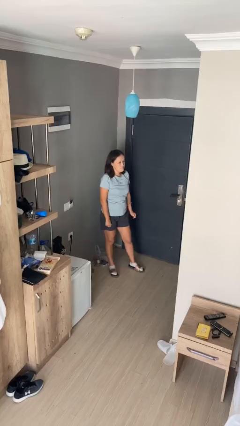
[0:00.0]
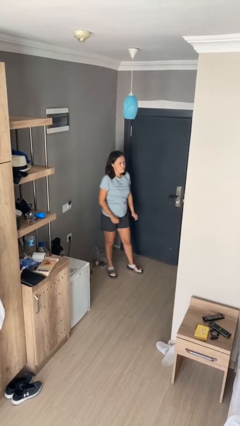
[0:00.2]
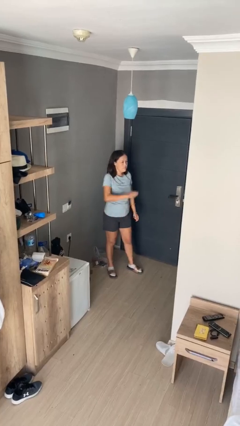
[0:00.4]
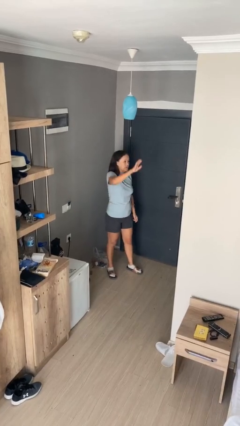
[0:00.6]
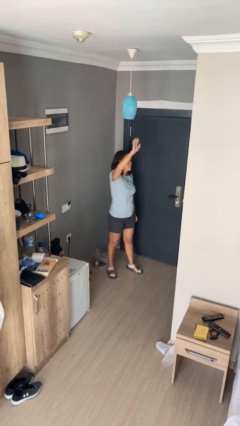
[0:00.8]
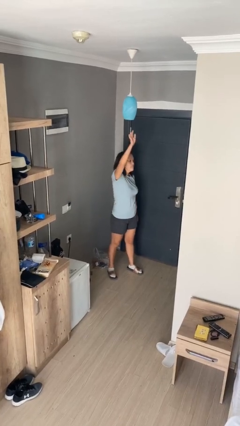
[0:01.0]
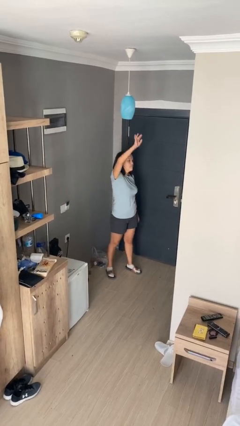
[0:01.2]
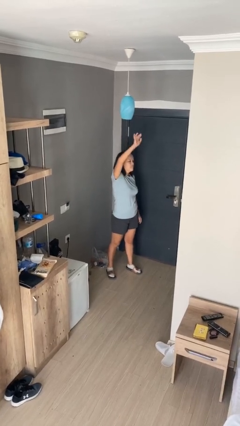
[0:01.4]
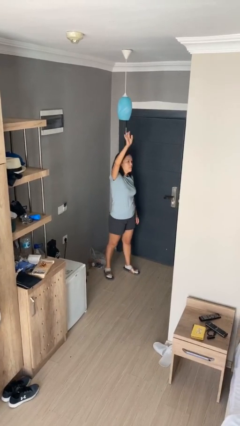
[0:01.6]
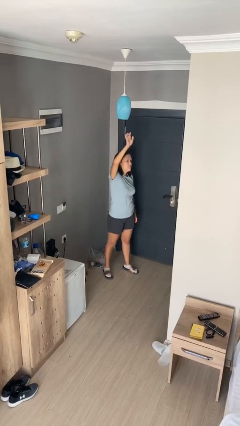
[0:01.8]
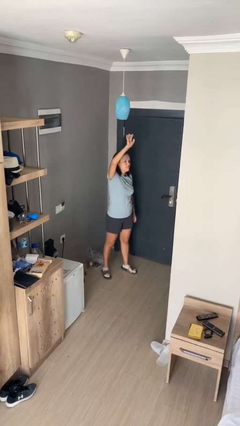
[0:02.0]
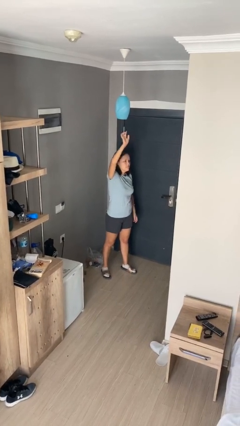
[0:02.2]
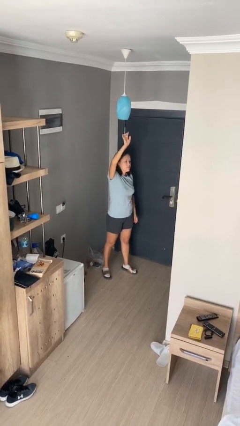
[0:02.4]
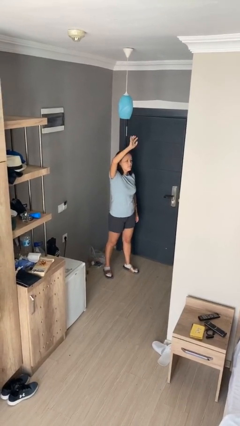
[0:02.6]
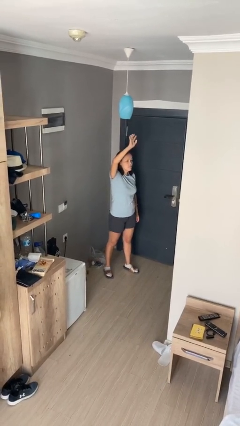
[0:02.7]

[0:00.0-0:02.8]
person gestures raise hand

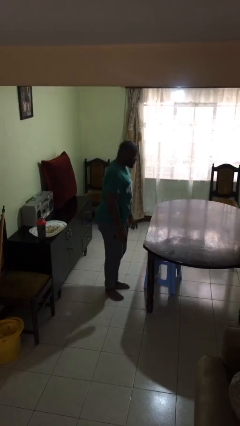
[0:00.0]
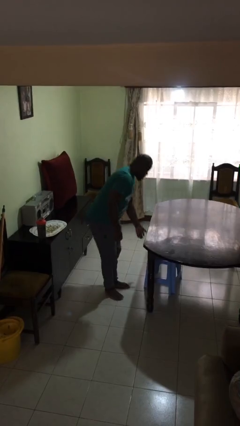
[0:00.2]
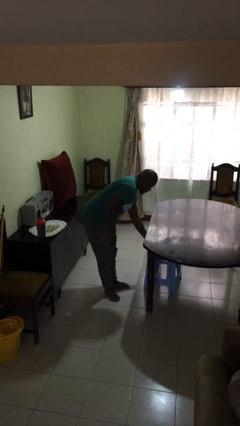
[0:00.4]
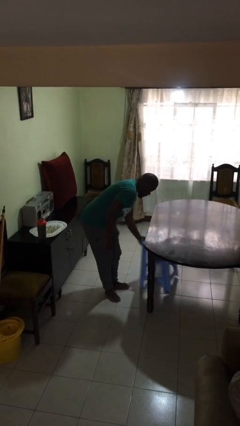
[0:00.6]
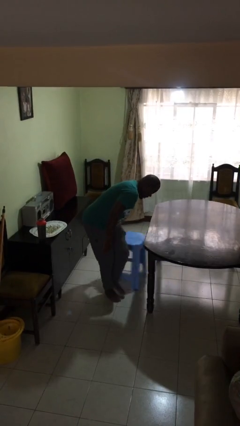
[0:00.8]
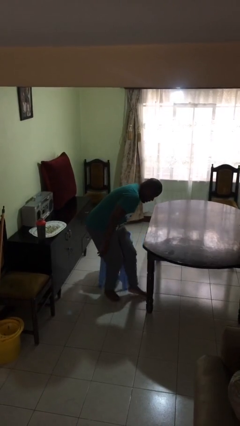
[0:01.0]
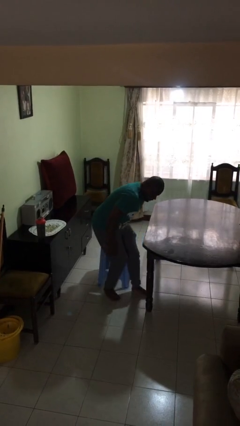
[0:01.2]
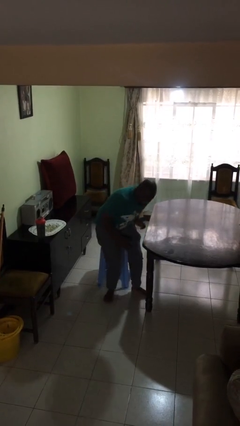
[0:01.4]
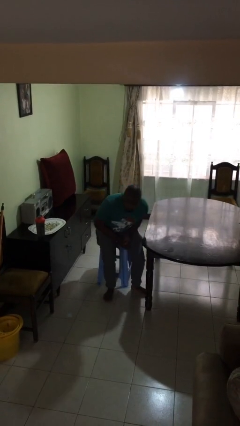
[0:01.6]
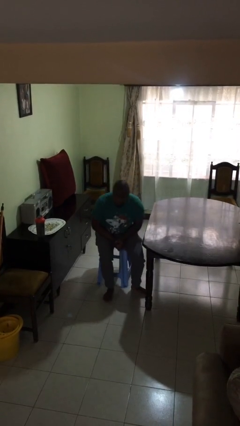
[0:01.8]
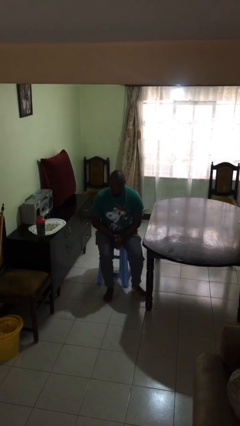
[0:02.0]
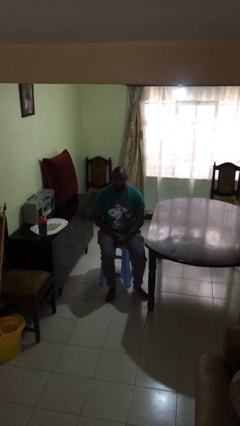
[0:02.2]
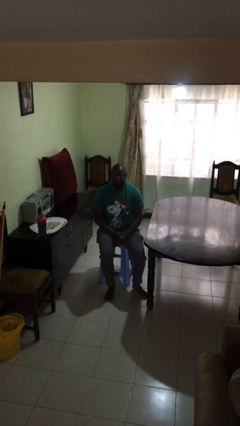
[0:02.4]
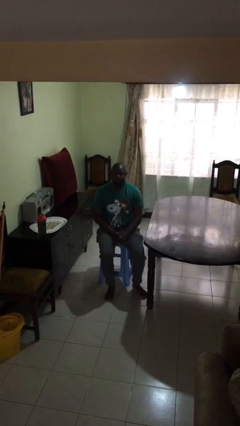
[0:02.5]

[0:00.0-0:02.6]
person sits down

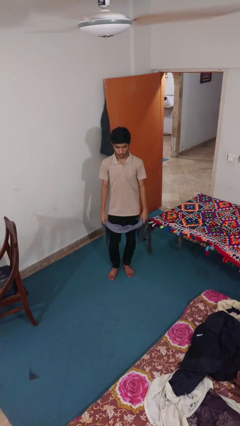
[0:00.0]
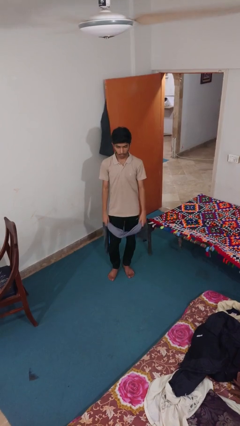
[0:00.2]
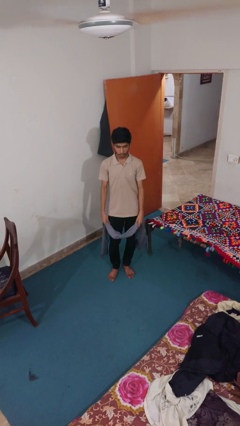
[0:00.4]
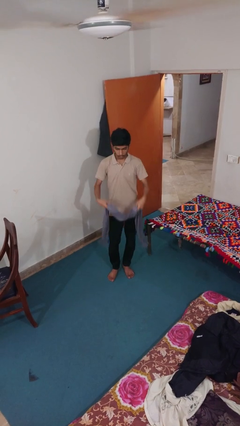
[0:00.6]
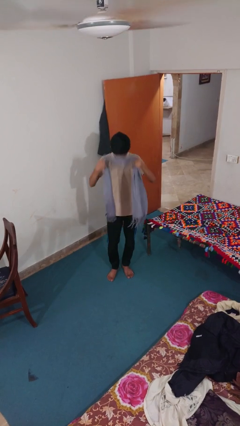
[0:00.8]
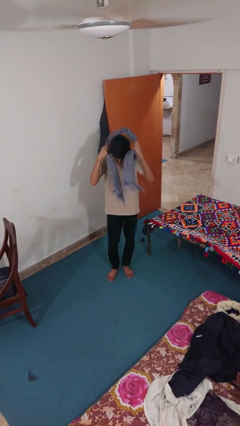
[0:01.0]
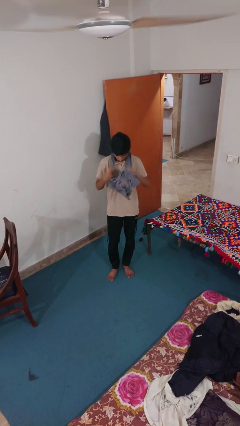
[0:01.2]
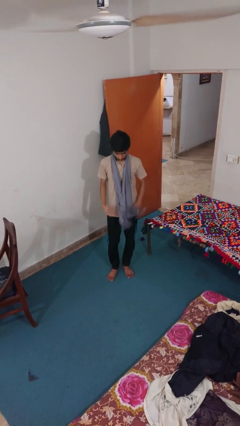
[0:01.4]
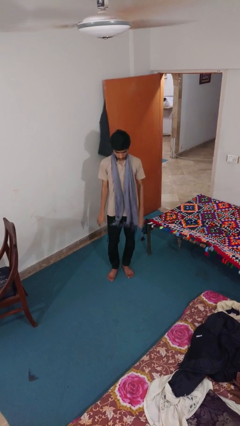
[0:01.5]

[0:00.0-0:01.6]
person puts on scarf

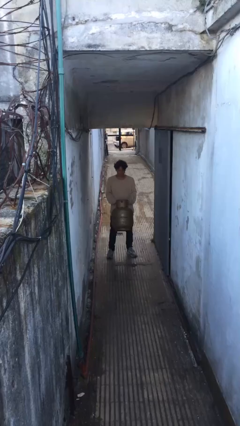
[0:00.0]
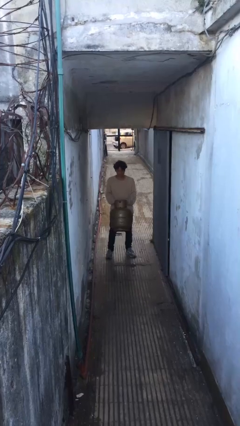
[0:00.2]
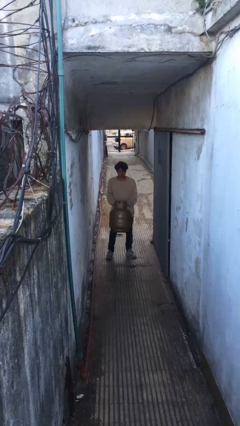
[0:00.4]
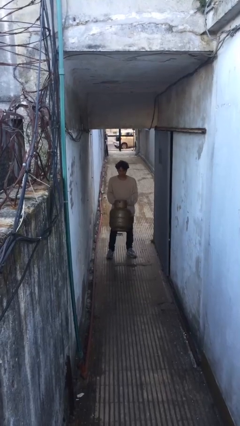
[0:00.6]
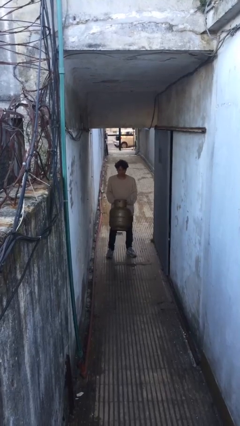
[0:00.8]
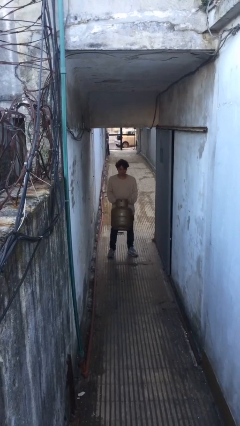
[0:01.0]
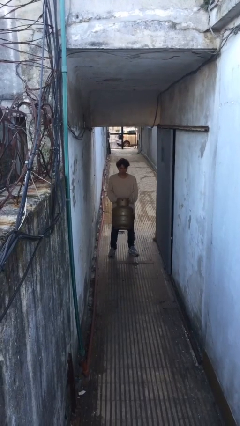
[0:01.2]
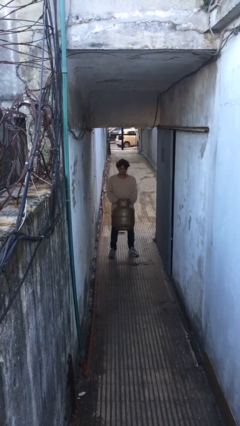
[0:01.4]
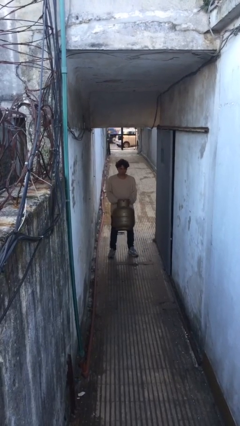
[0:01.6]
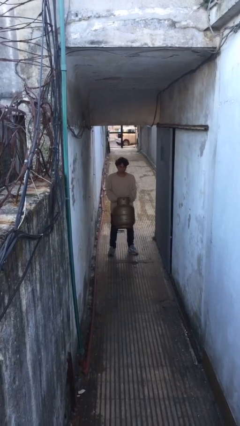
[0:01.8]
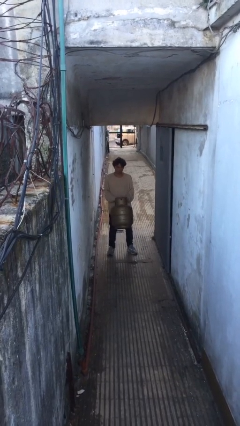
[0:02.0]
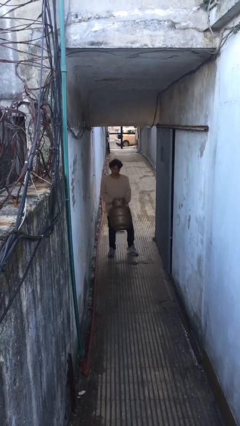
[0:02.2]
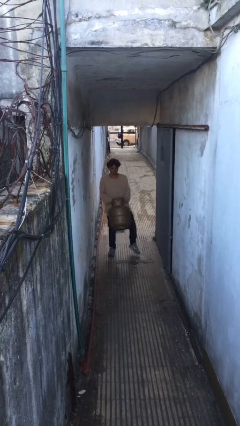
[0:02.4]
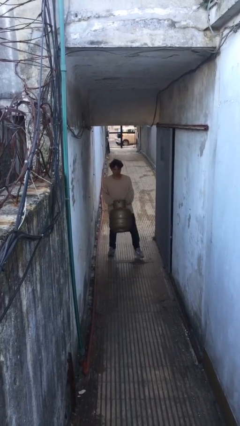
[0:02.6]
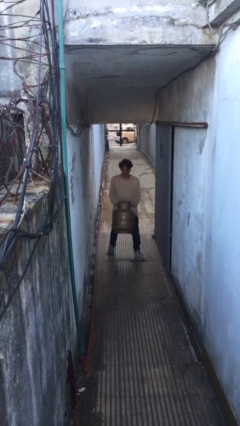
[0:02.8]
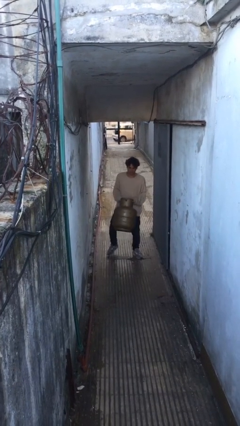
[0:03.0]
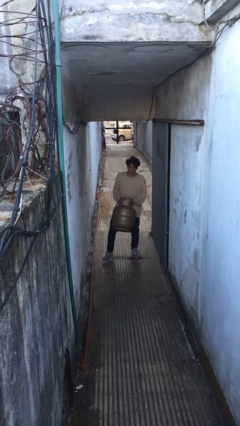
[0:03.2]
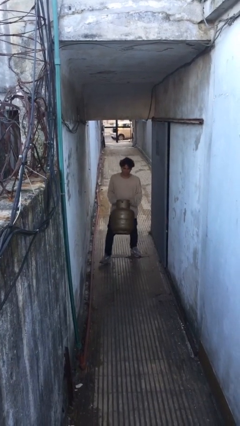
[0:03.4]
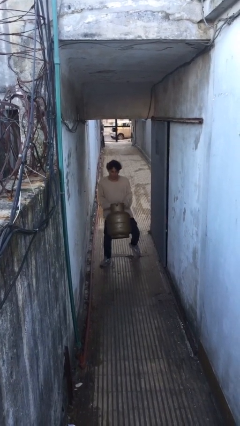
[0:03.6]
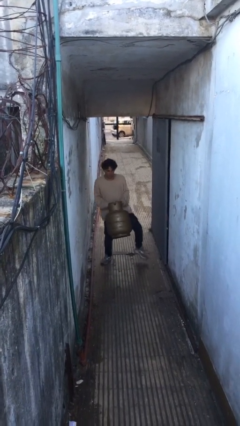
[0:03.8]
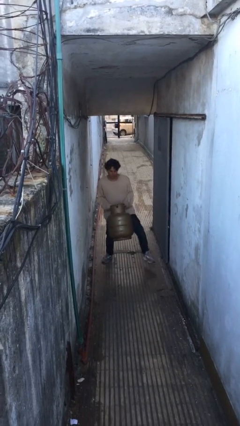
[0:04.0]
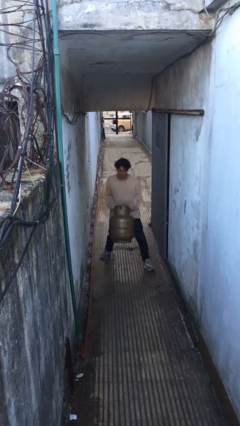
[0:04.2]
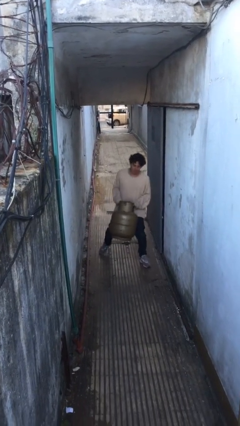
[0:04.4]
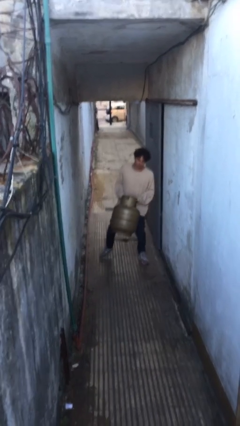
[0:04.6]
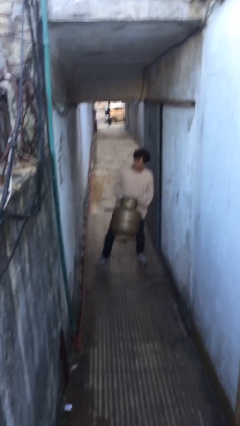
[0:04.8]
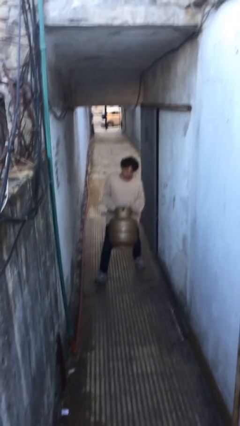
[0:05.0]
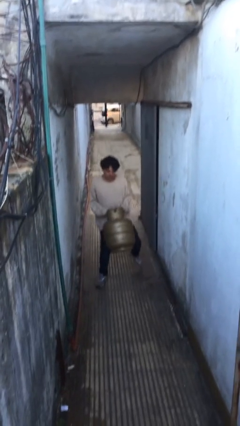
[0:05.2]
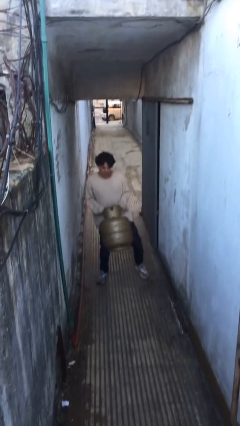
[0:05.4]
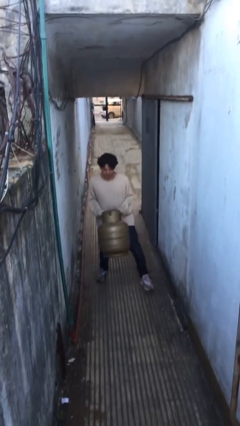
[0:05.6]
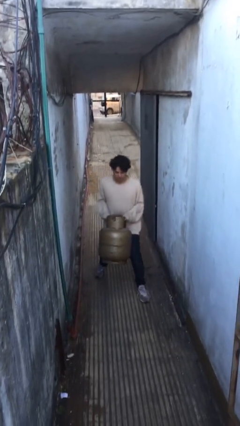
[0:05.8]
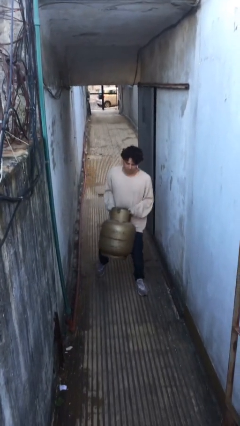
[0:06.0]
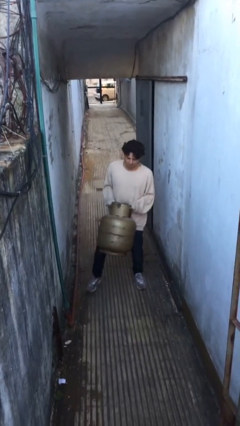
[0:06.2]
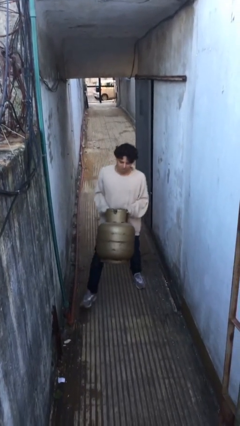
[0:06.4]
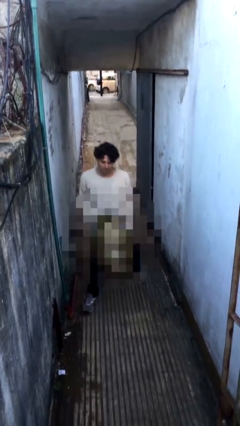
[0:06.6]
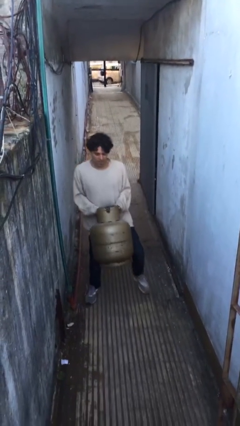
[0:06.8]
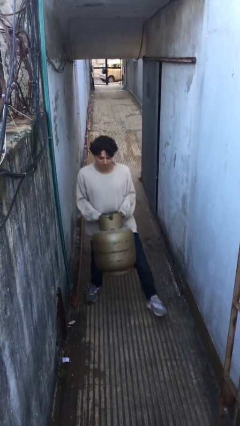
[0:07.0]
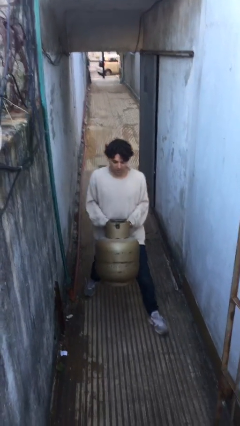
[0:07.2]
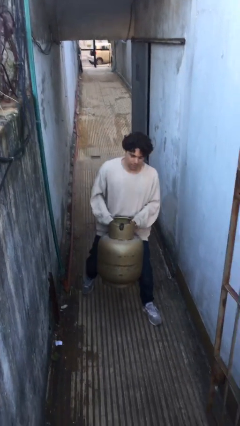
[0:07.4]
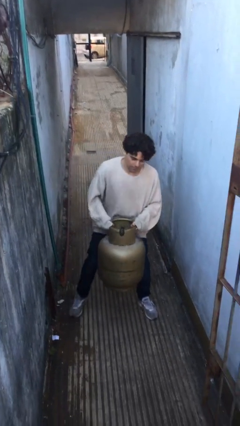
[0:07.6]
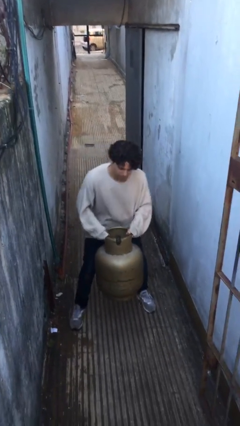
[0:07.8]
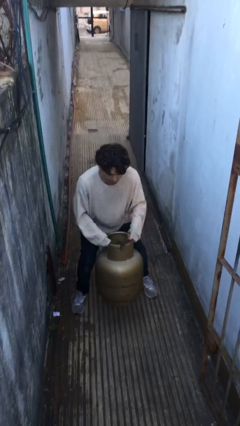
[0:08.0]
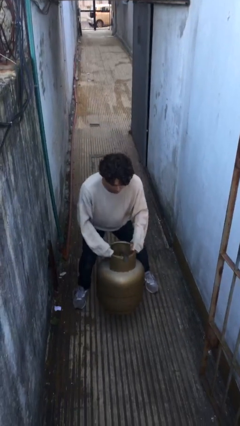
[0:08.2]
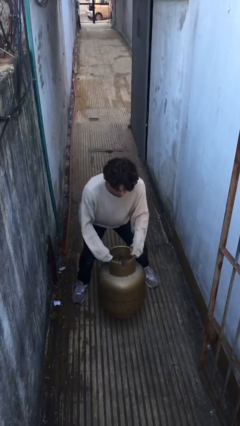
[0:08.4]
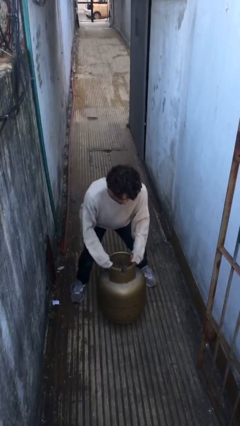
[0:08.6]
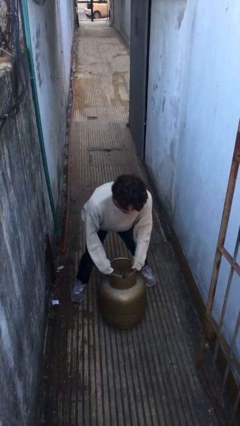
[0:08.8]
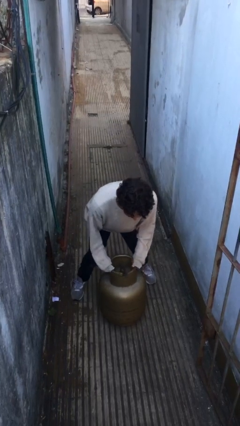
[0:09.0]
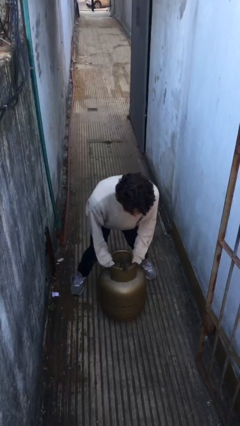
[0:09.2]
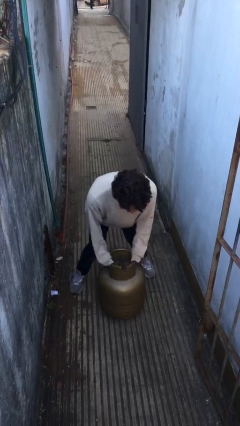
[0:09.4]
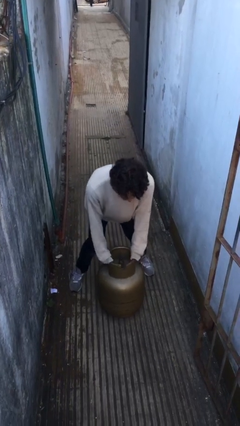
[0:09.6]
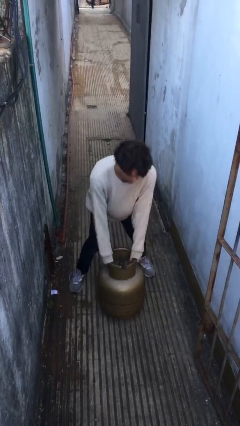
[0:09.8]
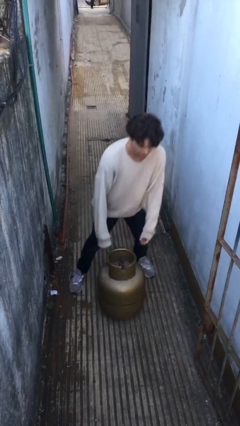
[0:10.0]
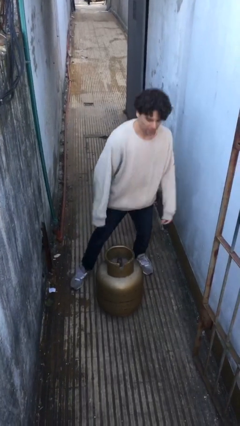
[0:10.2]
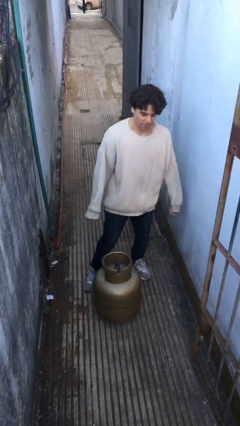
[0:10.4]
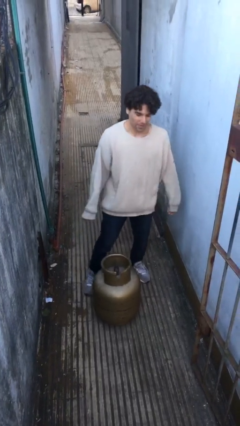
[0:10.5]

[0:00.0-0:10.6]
person carries heavy object
